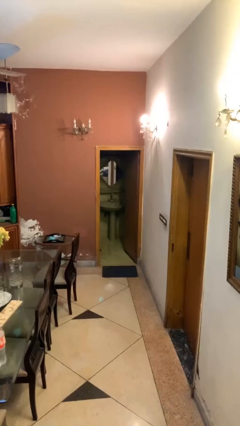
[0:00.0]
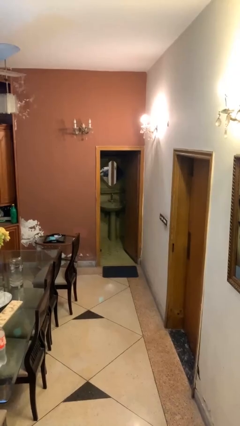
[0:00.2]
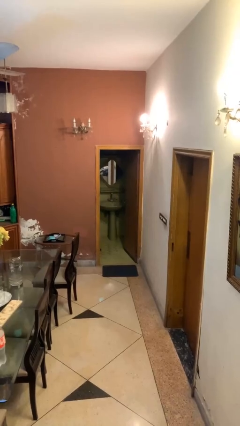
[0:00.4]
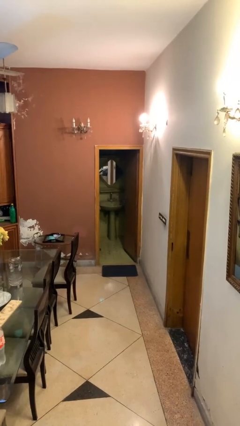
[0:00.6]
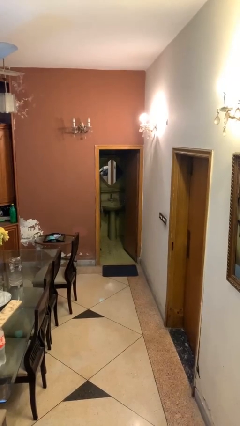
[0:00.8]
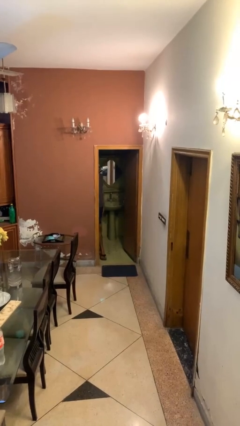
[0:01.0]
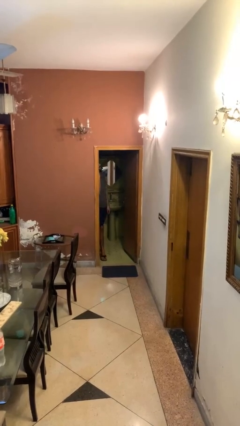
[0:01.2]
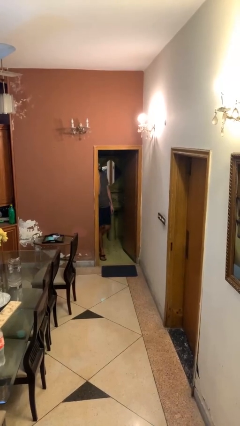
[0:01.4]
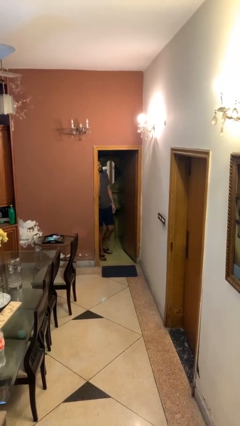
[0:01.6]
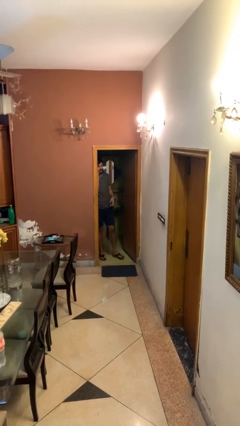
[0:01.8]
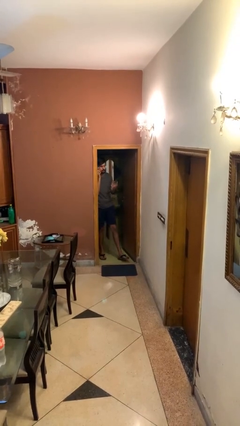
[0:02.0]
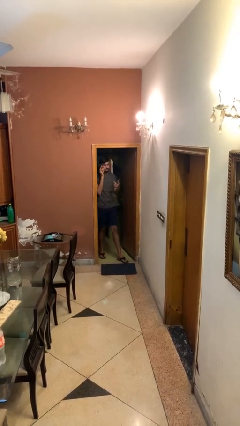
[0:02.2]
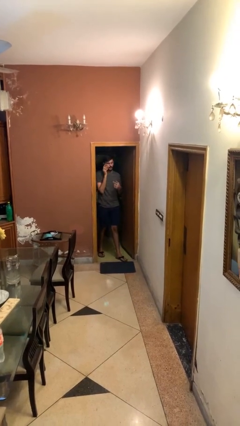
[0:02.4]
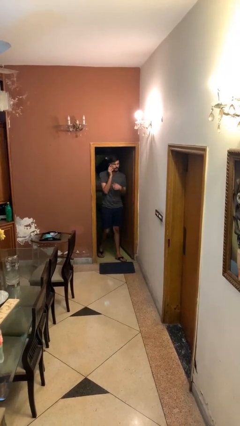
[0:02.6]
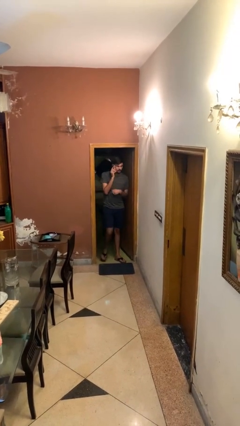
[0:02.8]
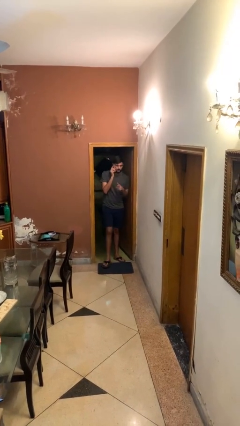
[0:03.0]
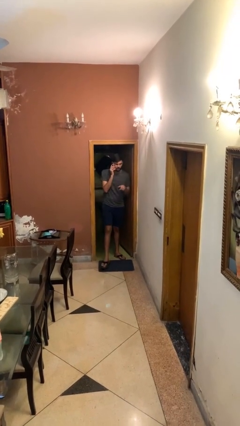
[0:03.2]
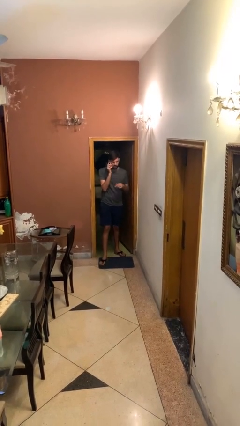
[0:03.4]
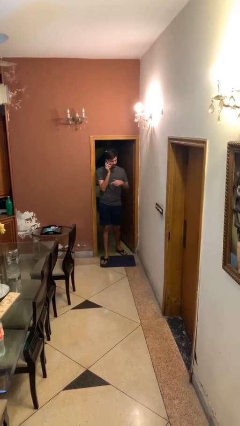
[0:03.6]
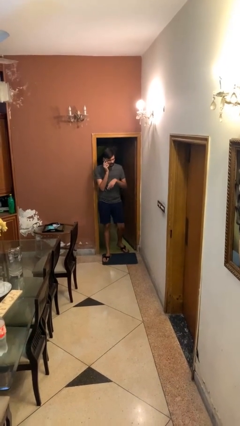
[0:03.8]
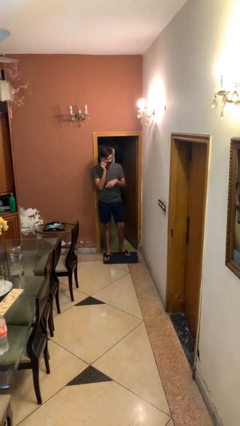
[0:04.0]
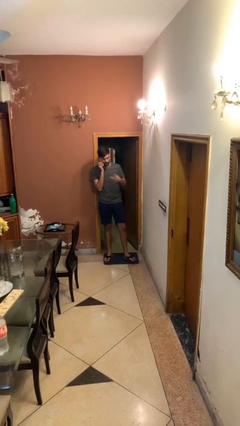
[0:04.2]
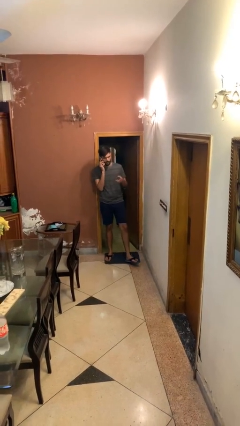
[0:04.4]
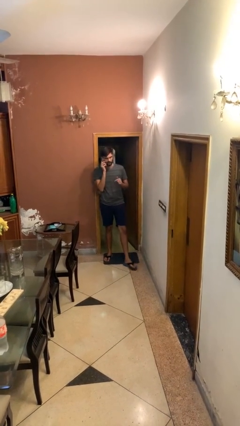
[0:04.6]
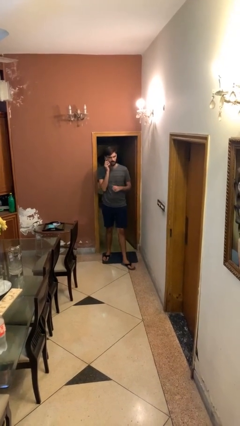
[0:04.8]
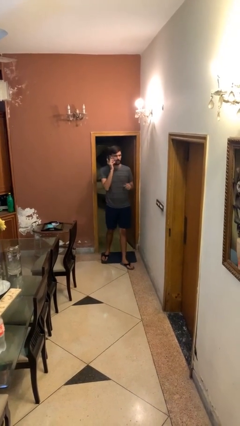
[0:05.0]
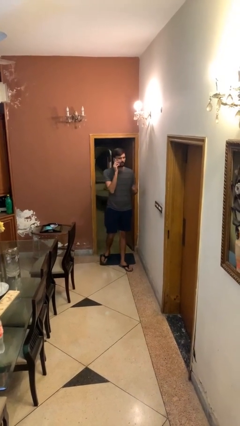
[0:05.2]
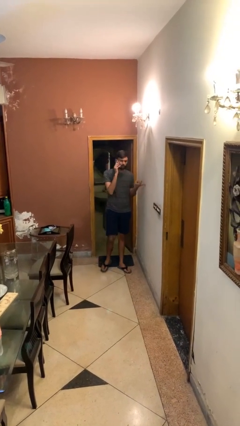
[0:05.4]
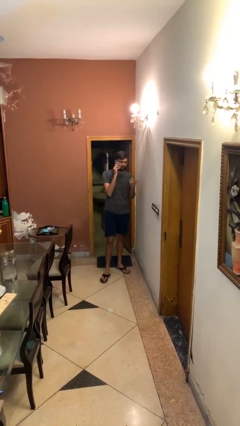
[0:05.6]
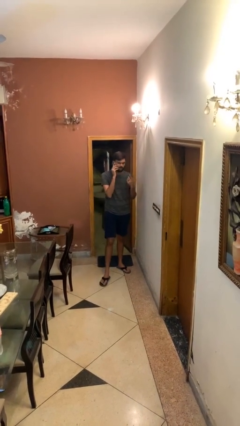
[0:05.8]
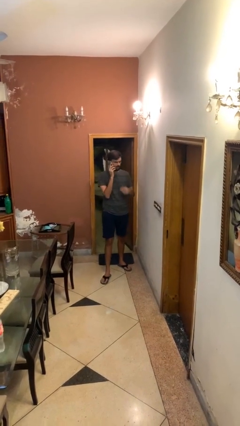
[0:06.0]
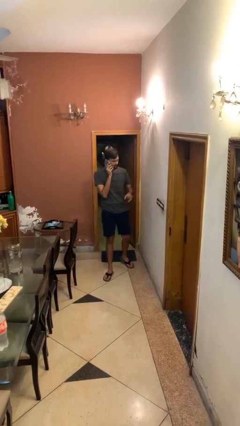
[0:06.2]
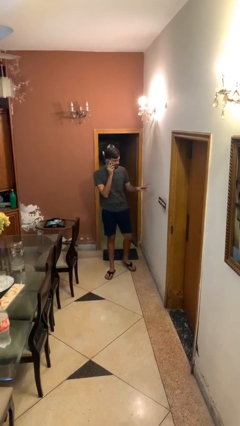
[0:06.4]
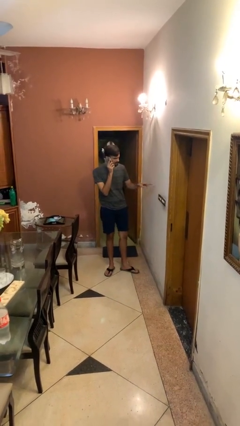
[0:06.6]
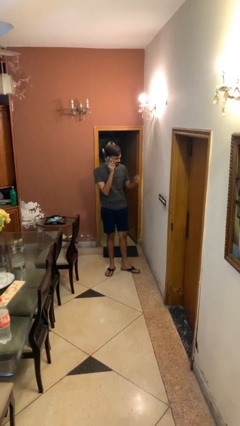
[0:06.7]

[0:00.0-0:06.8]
person enters scene through structure

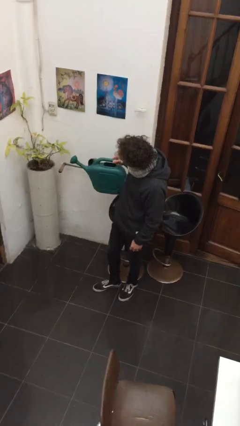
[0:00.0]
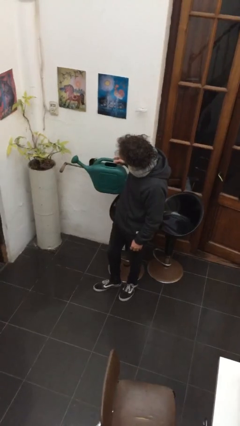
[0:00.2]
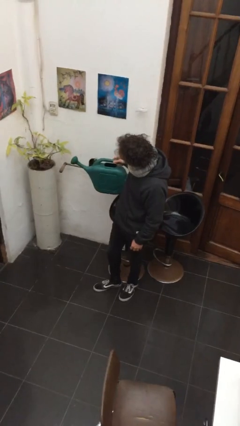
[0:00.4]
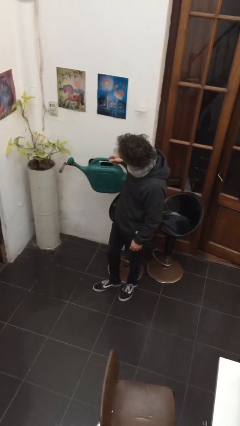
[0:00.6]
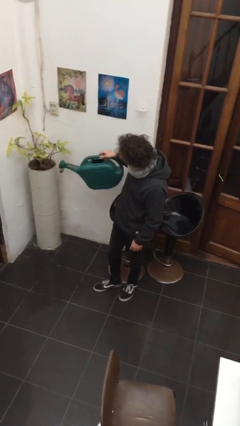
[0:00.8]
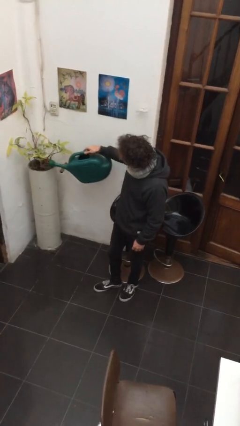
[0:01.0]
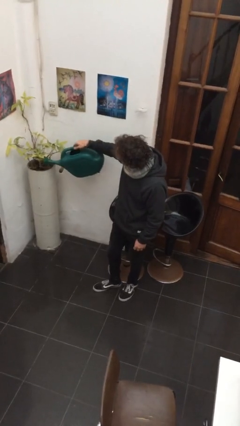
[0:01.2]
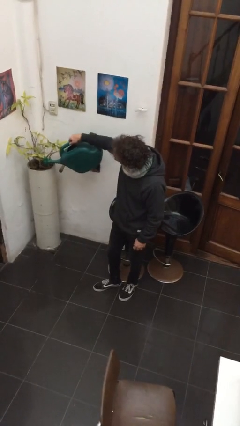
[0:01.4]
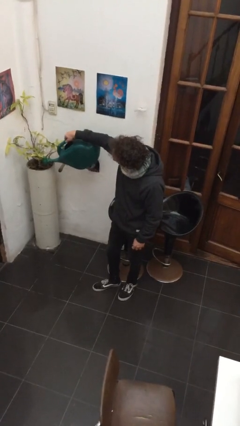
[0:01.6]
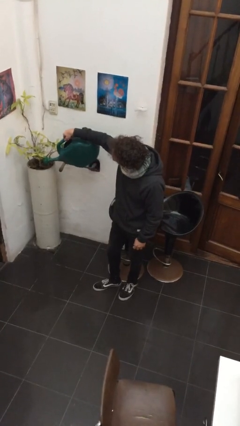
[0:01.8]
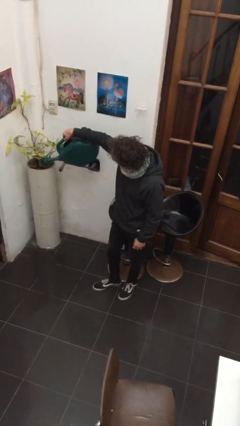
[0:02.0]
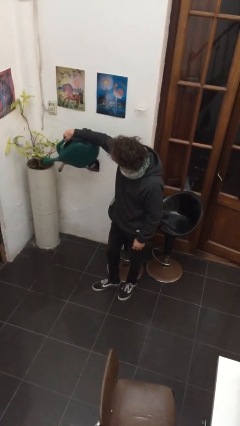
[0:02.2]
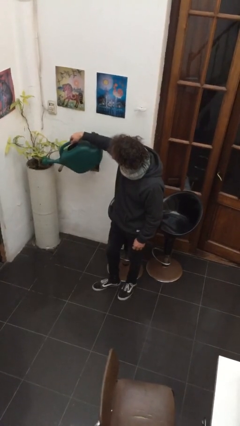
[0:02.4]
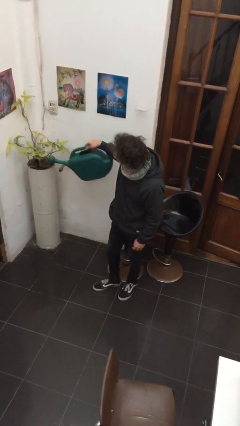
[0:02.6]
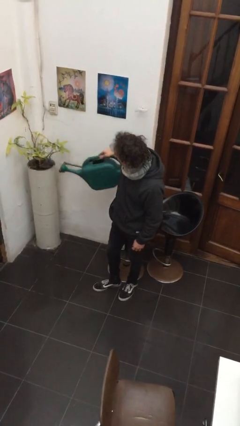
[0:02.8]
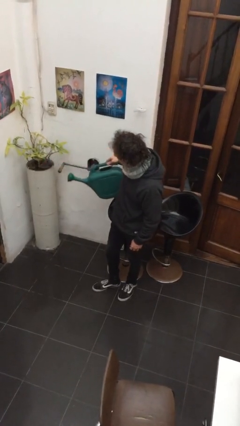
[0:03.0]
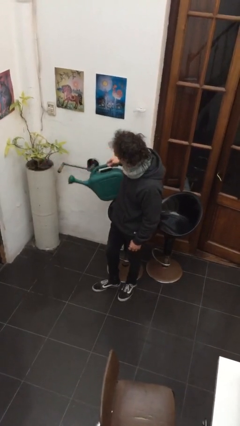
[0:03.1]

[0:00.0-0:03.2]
person waters houseplant

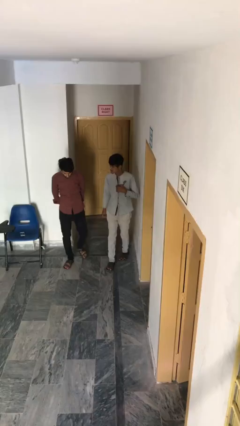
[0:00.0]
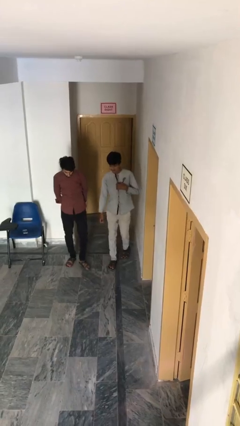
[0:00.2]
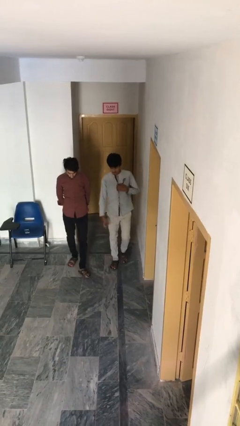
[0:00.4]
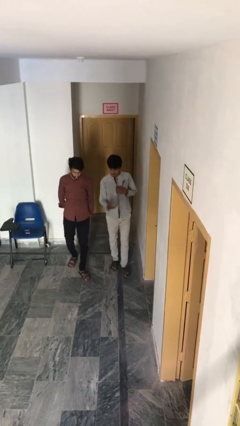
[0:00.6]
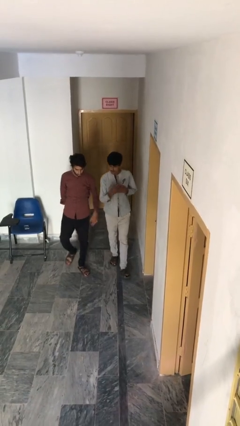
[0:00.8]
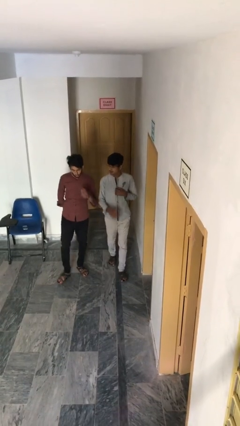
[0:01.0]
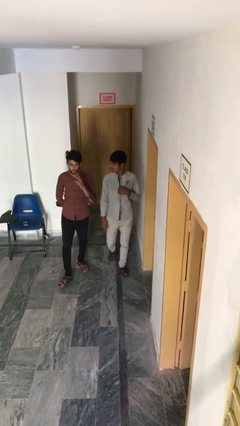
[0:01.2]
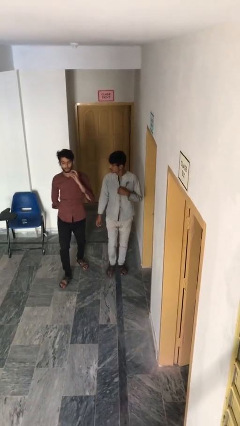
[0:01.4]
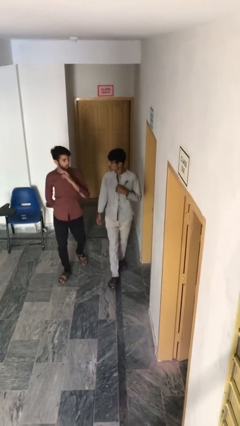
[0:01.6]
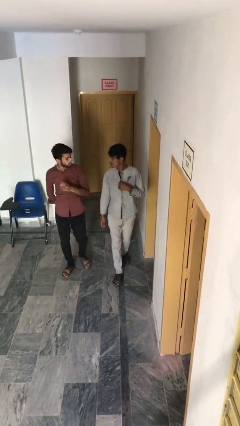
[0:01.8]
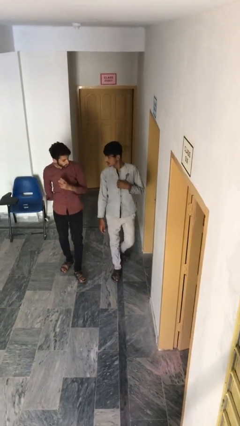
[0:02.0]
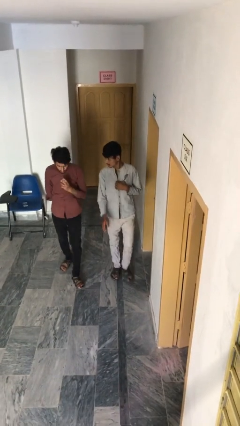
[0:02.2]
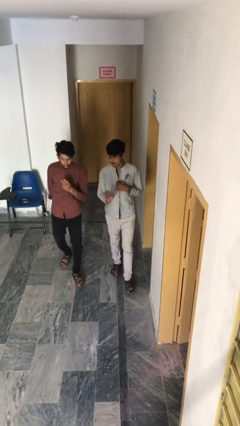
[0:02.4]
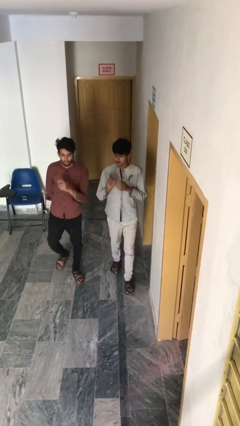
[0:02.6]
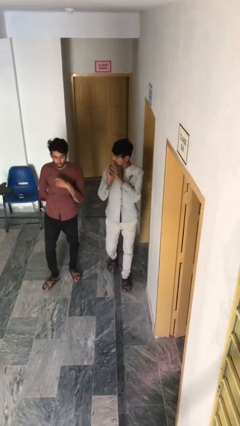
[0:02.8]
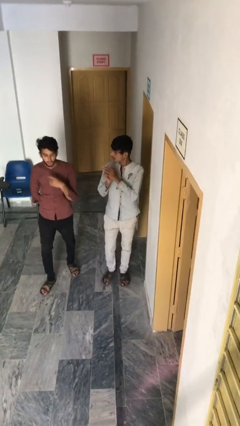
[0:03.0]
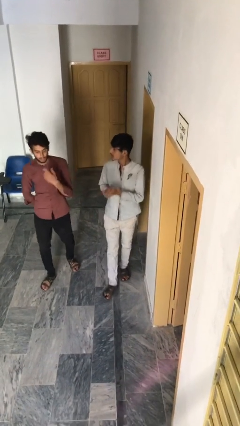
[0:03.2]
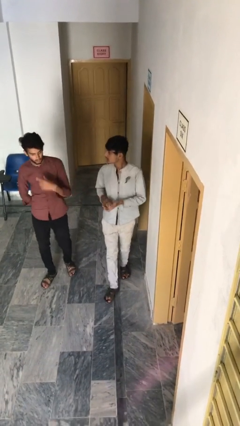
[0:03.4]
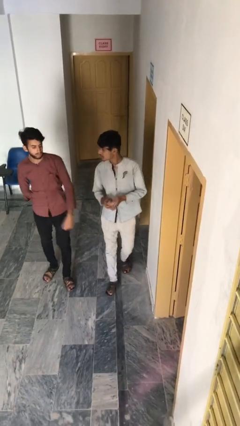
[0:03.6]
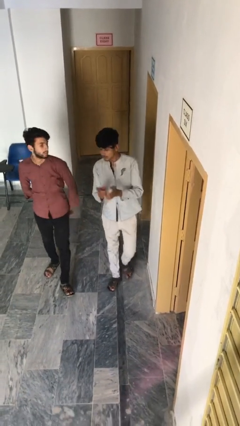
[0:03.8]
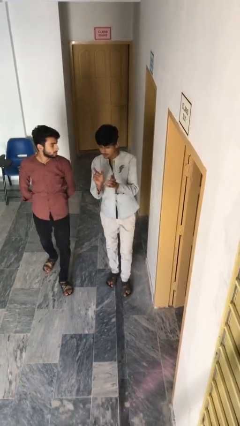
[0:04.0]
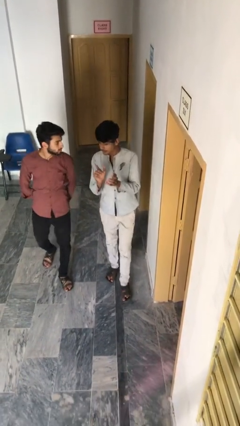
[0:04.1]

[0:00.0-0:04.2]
person talks to person

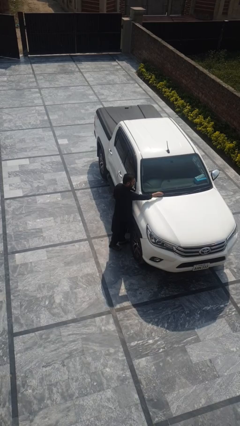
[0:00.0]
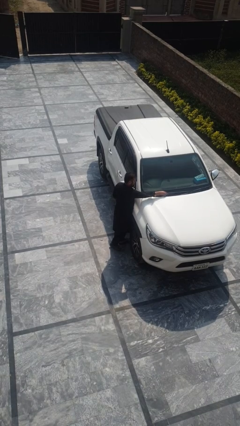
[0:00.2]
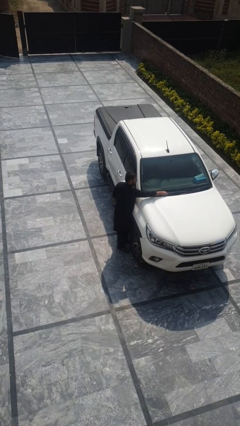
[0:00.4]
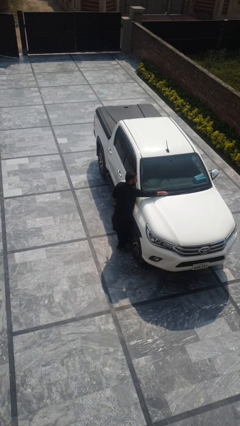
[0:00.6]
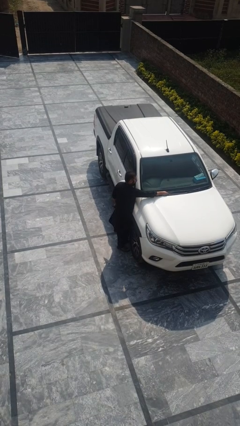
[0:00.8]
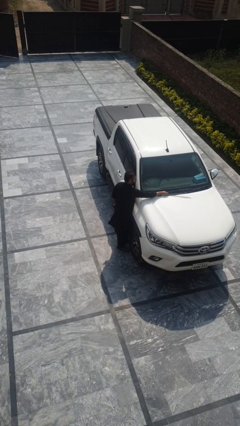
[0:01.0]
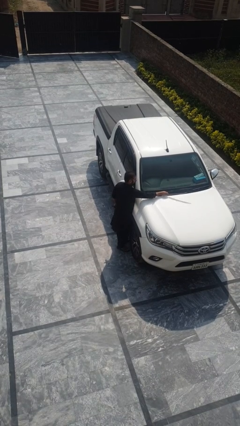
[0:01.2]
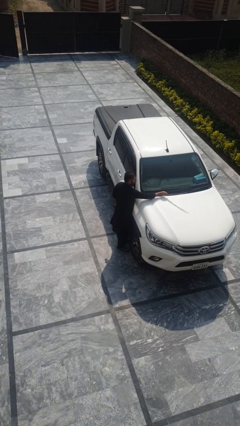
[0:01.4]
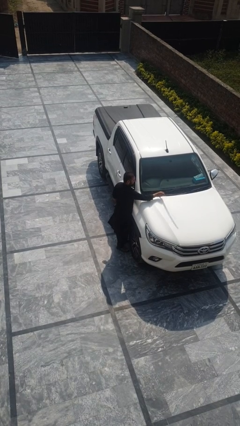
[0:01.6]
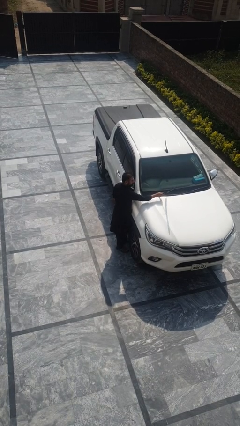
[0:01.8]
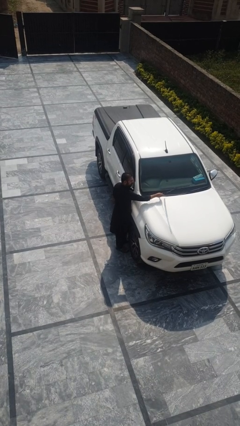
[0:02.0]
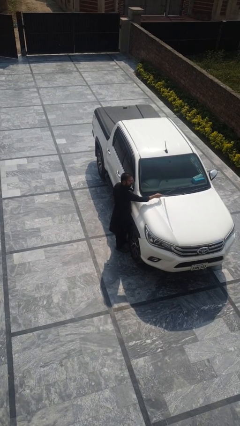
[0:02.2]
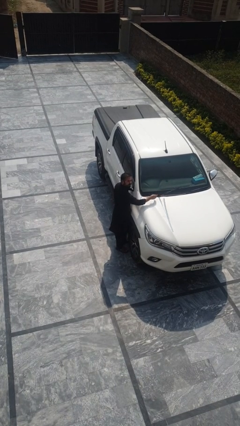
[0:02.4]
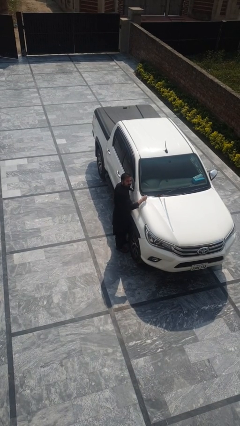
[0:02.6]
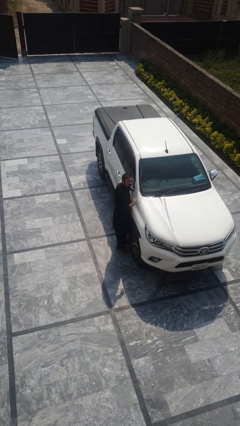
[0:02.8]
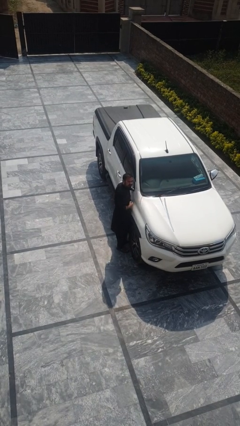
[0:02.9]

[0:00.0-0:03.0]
person flips up car wipers

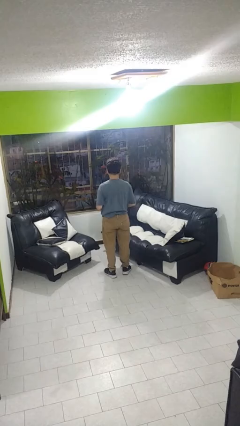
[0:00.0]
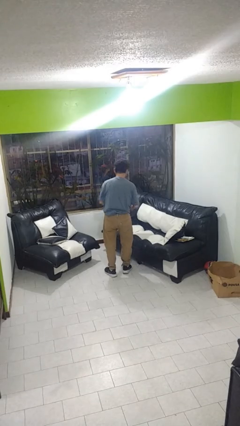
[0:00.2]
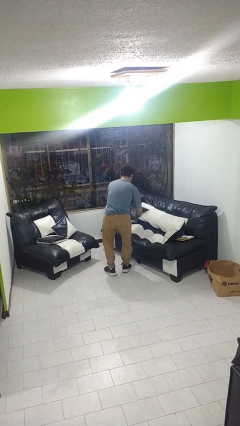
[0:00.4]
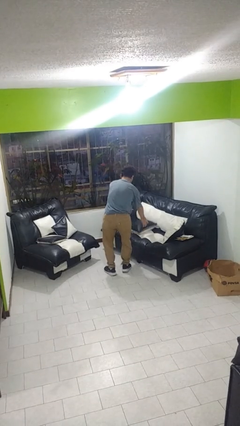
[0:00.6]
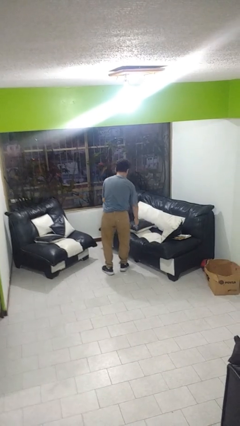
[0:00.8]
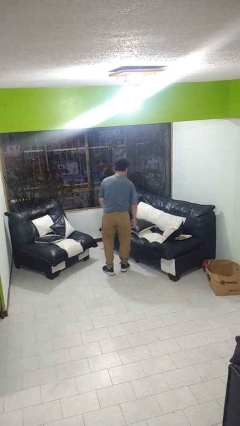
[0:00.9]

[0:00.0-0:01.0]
person puts down object on couch
